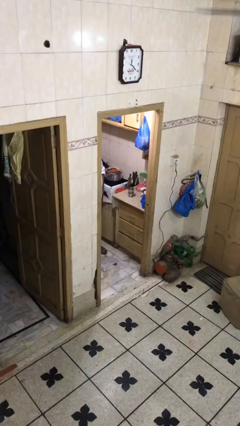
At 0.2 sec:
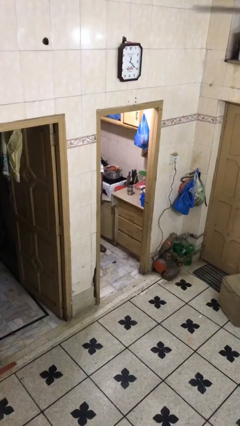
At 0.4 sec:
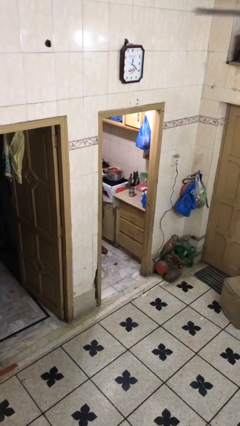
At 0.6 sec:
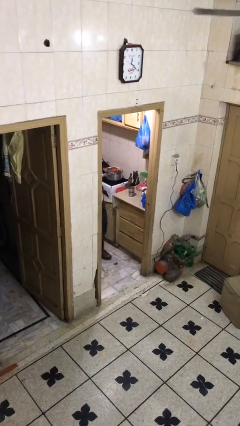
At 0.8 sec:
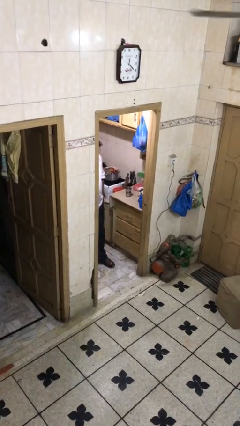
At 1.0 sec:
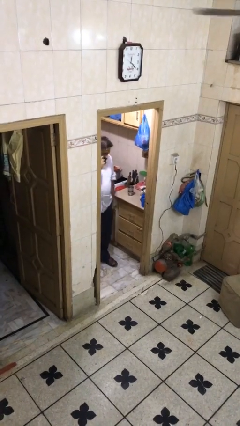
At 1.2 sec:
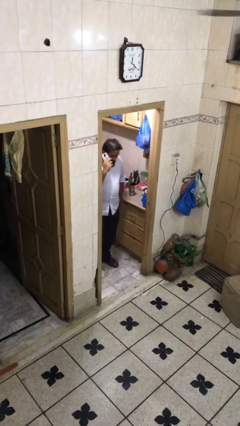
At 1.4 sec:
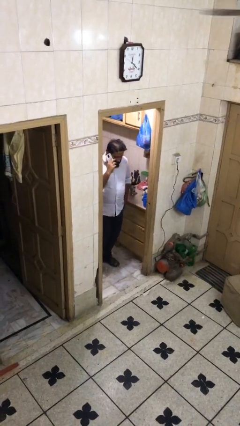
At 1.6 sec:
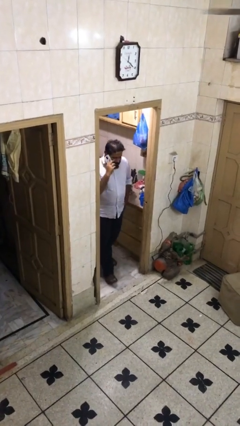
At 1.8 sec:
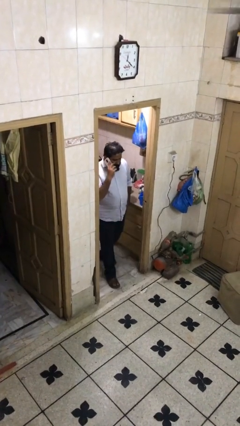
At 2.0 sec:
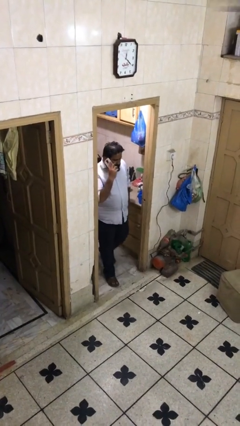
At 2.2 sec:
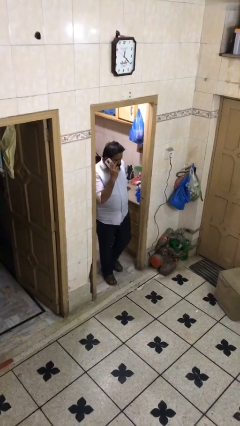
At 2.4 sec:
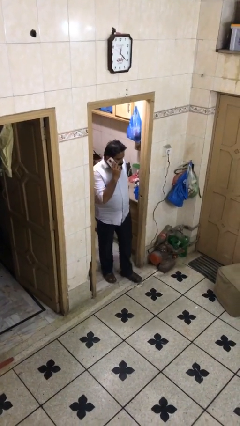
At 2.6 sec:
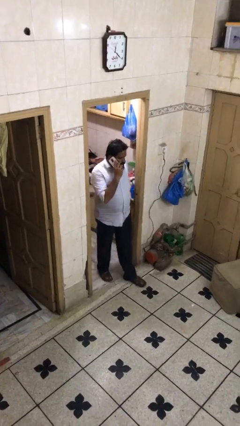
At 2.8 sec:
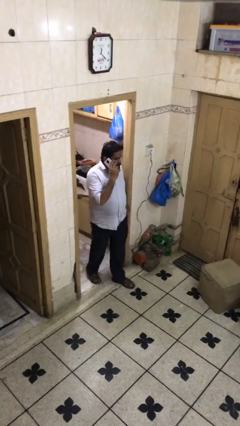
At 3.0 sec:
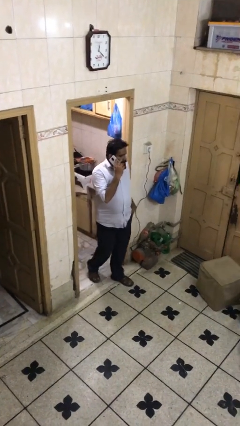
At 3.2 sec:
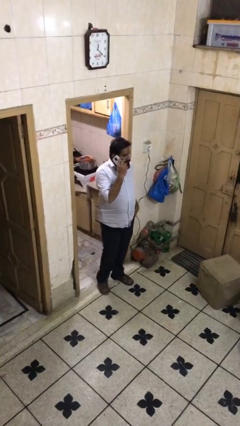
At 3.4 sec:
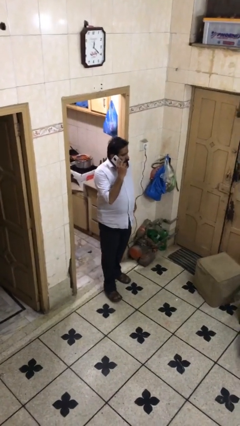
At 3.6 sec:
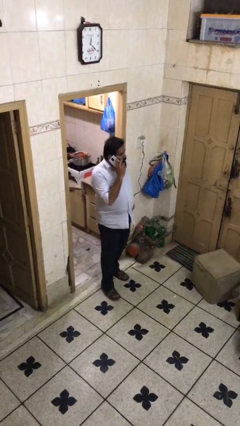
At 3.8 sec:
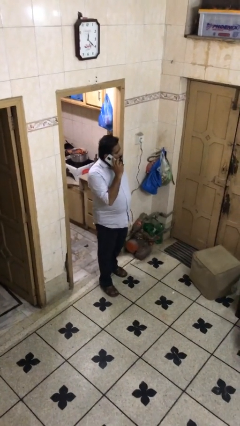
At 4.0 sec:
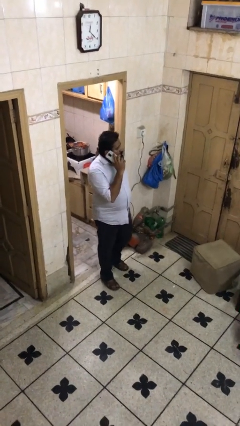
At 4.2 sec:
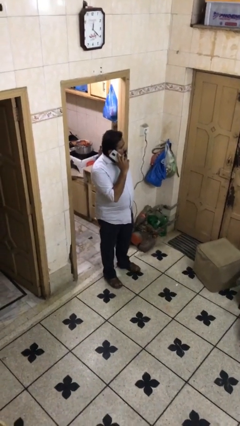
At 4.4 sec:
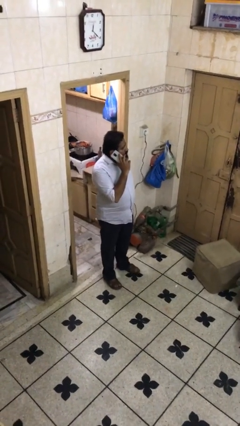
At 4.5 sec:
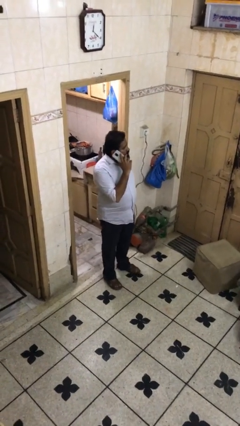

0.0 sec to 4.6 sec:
person enters scene through structure

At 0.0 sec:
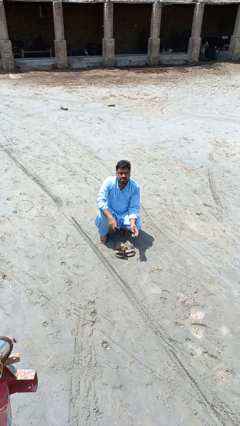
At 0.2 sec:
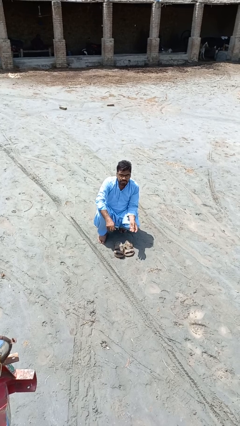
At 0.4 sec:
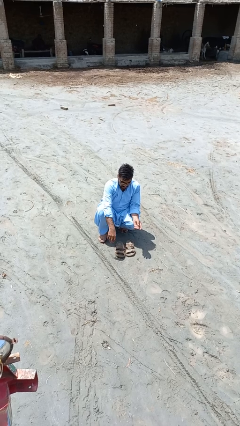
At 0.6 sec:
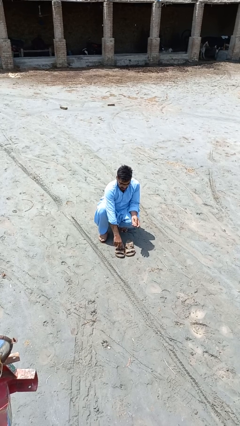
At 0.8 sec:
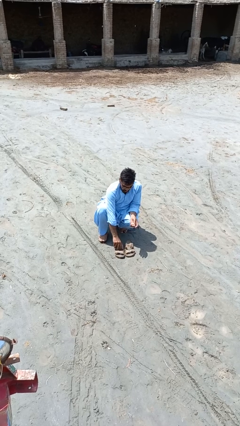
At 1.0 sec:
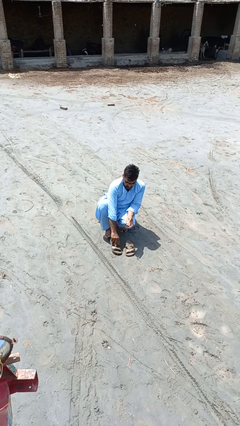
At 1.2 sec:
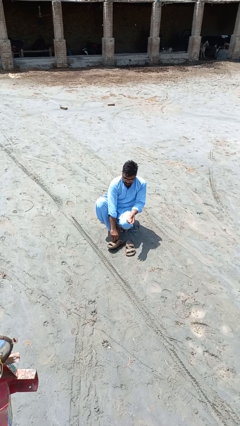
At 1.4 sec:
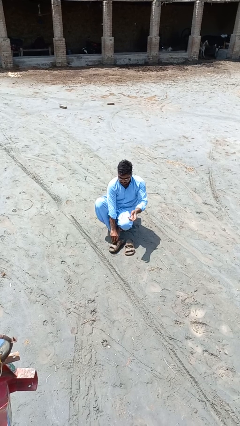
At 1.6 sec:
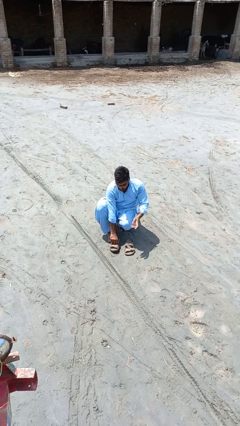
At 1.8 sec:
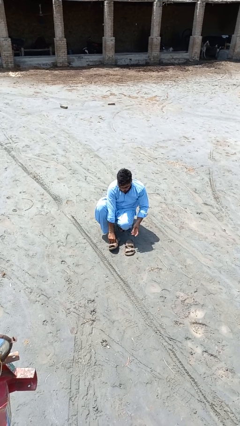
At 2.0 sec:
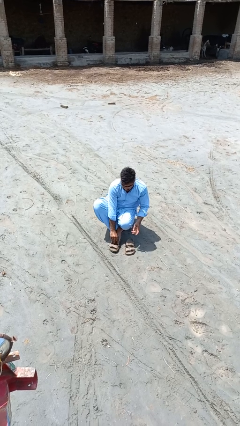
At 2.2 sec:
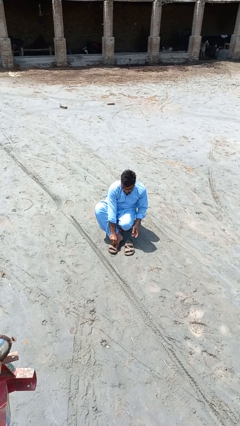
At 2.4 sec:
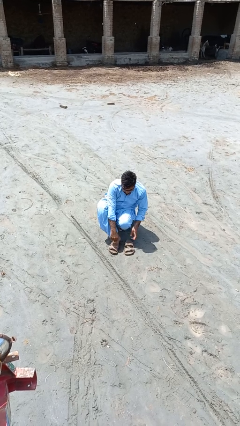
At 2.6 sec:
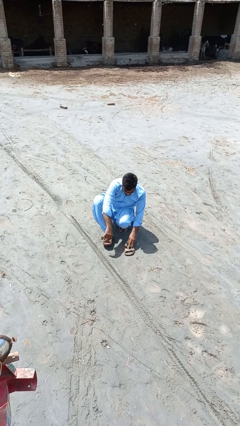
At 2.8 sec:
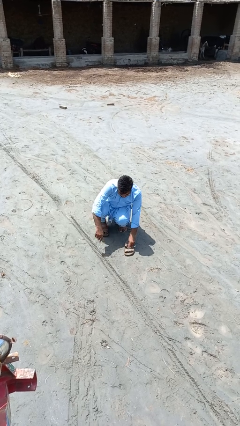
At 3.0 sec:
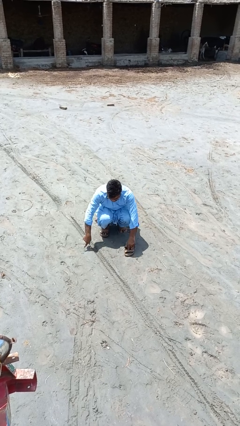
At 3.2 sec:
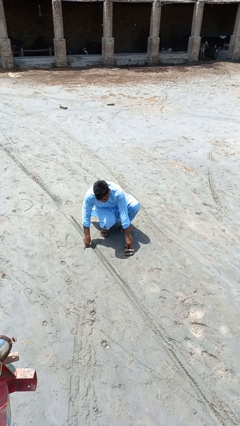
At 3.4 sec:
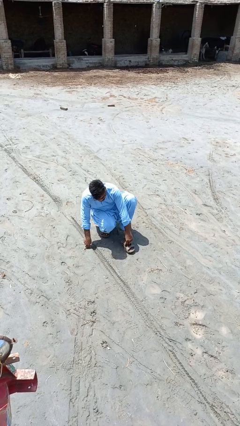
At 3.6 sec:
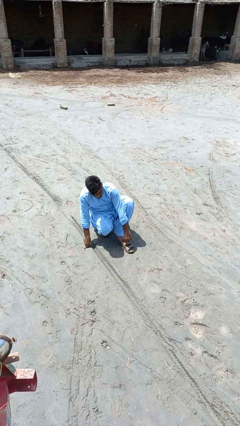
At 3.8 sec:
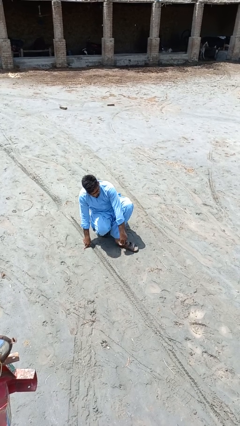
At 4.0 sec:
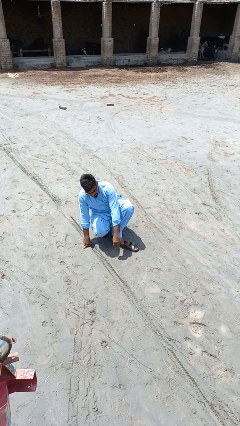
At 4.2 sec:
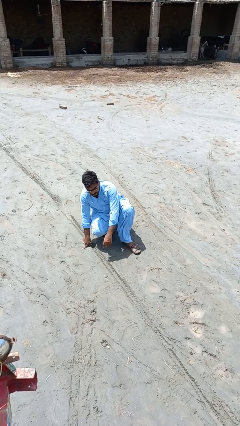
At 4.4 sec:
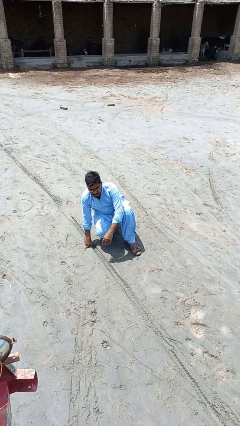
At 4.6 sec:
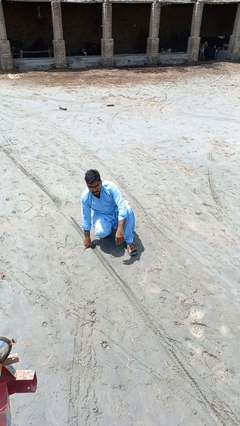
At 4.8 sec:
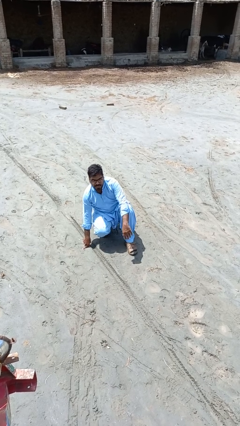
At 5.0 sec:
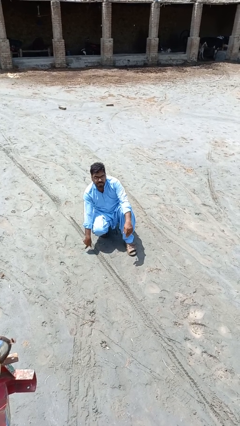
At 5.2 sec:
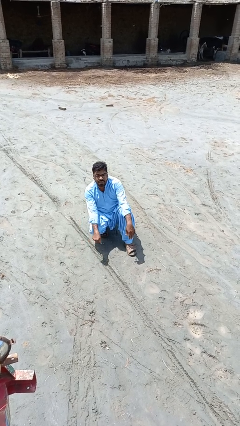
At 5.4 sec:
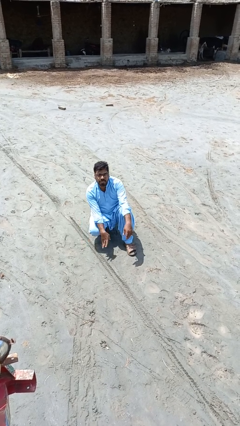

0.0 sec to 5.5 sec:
person puts on shoes

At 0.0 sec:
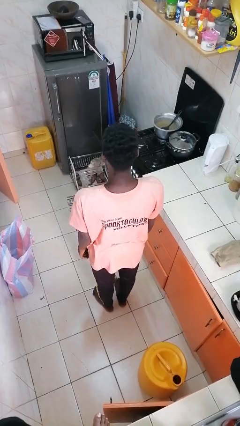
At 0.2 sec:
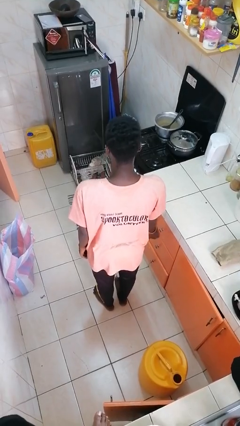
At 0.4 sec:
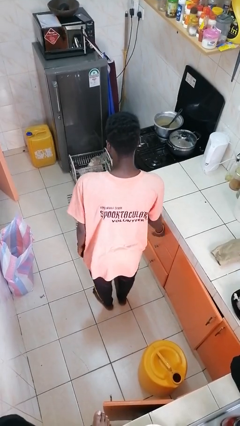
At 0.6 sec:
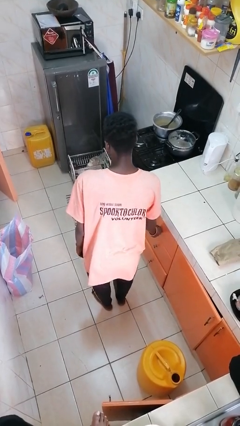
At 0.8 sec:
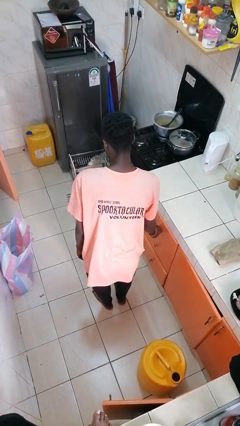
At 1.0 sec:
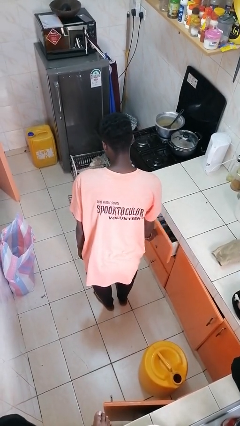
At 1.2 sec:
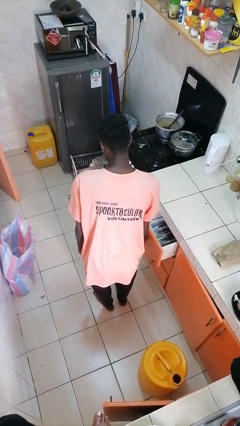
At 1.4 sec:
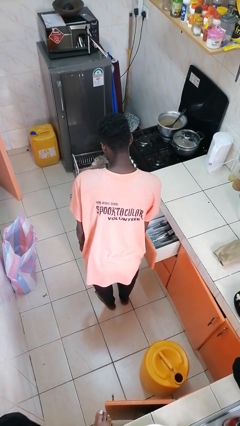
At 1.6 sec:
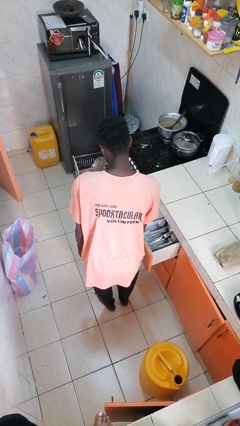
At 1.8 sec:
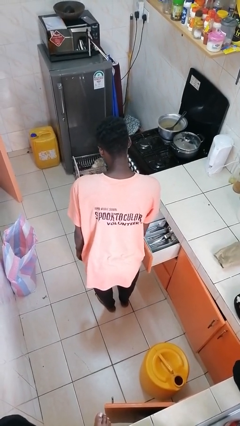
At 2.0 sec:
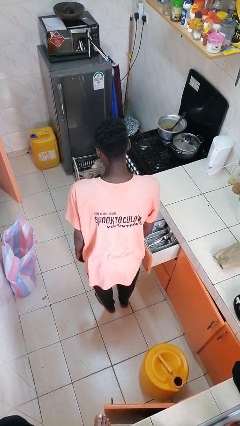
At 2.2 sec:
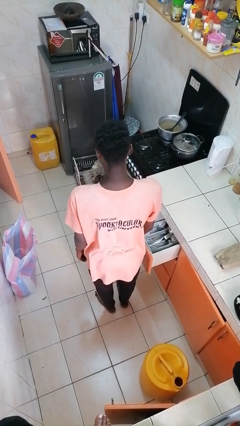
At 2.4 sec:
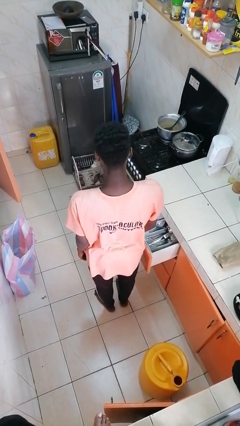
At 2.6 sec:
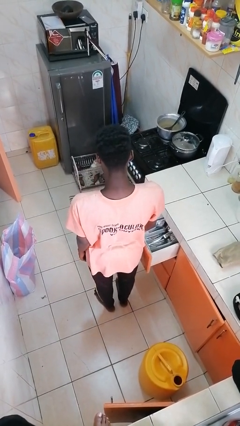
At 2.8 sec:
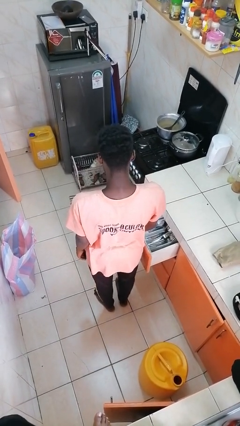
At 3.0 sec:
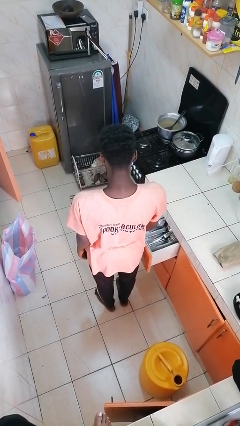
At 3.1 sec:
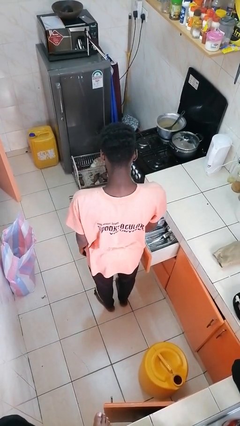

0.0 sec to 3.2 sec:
person opens kitchen drawer

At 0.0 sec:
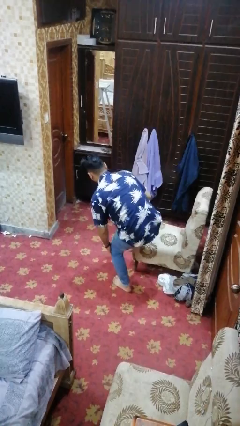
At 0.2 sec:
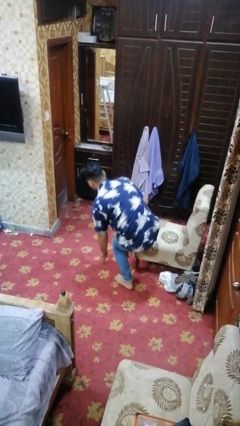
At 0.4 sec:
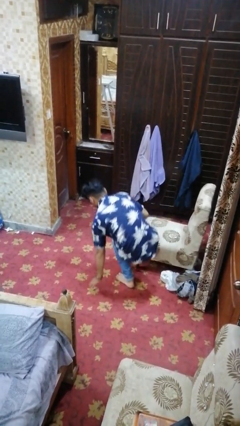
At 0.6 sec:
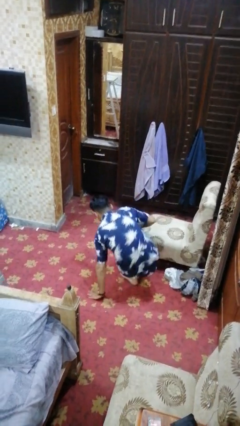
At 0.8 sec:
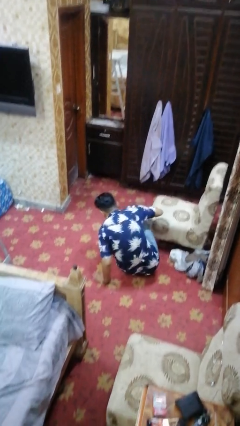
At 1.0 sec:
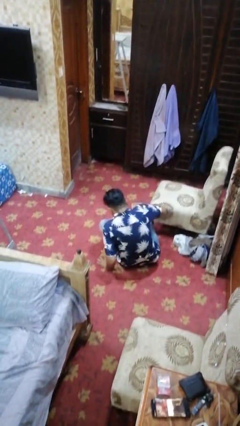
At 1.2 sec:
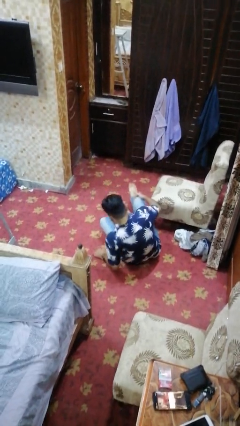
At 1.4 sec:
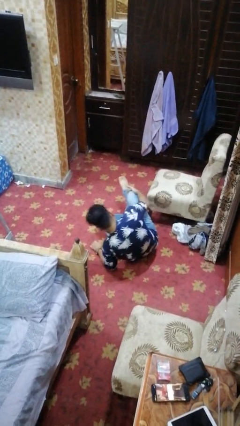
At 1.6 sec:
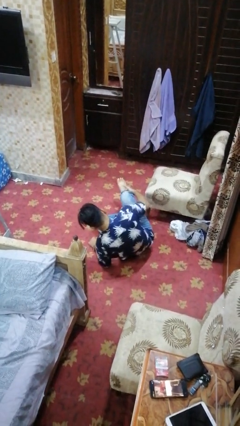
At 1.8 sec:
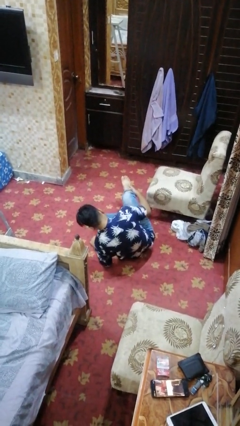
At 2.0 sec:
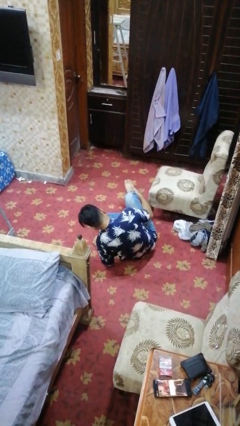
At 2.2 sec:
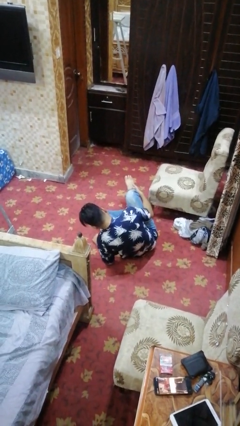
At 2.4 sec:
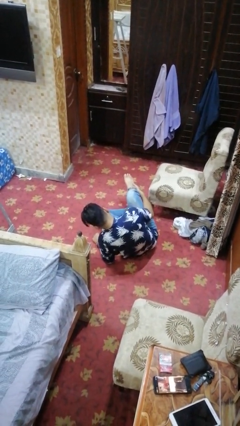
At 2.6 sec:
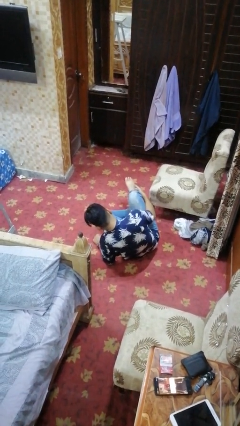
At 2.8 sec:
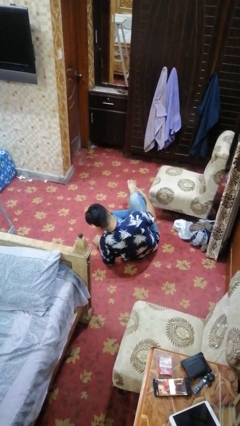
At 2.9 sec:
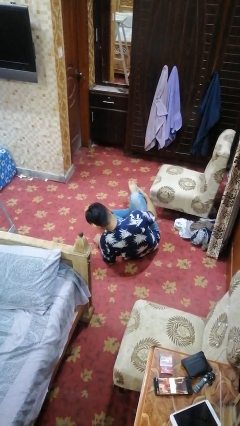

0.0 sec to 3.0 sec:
person lies down on floor

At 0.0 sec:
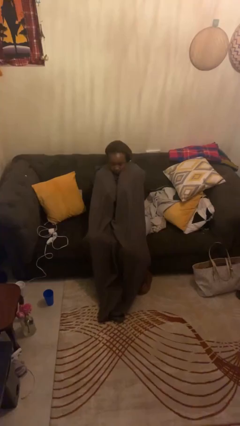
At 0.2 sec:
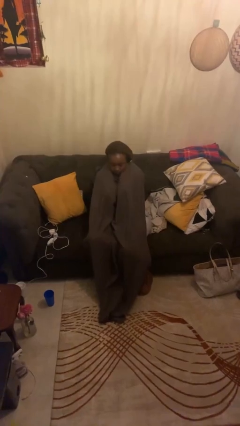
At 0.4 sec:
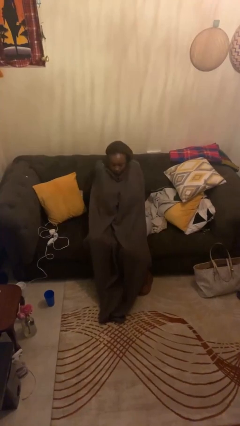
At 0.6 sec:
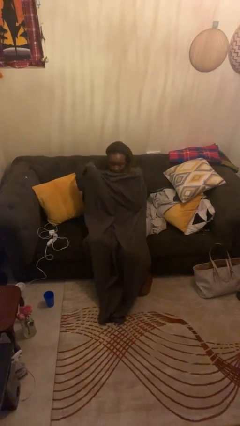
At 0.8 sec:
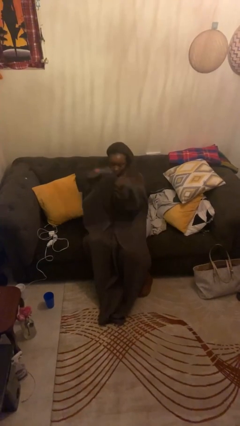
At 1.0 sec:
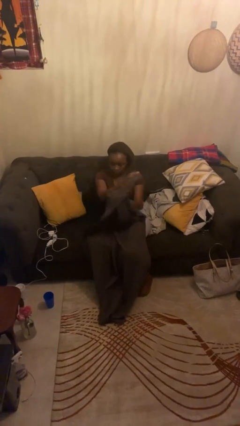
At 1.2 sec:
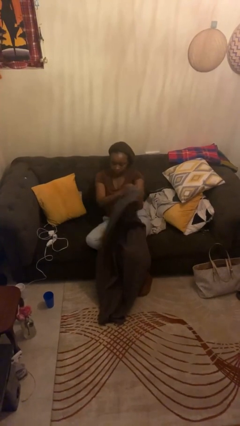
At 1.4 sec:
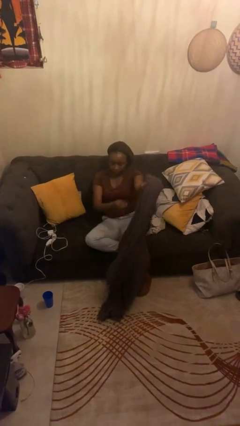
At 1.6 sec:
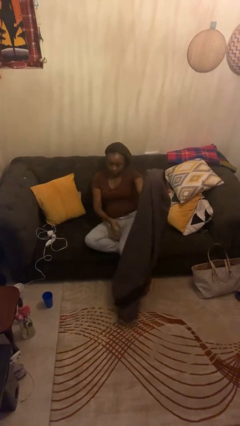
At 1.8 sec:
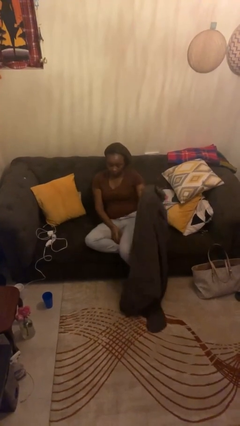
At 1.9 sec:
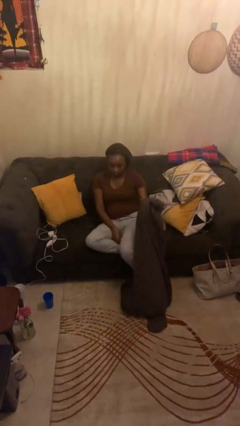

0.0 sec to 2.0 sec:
person uncovers with blanket
